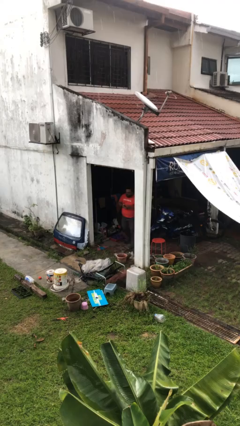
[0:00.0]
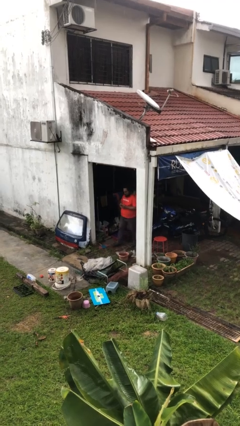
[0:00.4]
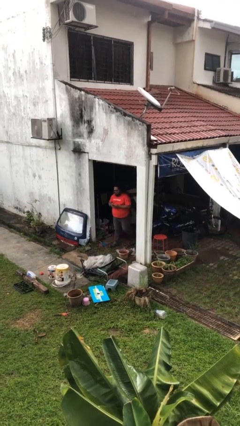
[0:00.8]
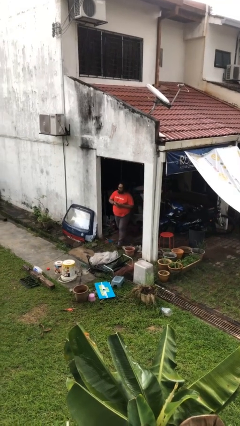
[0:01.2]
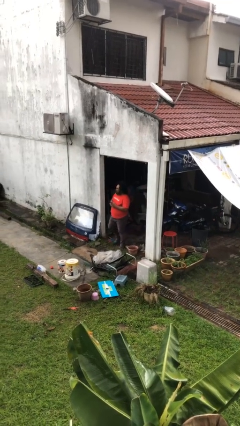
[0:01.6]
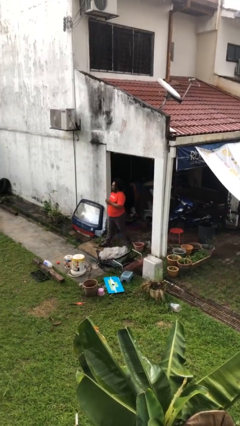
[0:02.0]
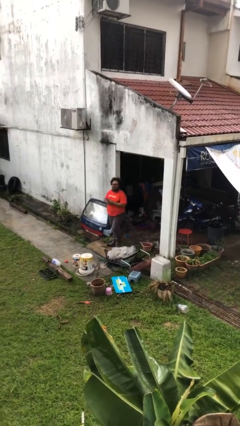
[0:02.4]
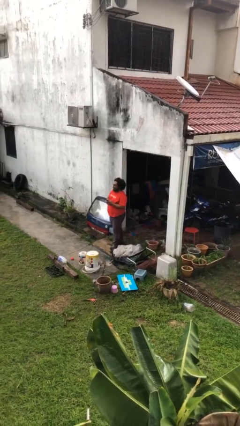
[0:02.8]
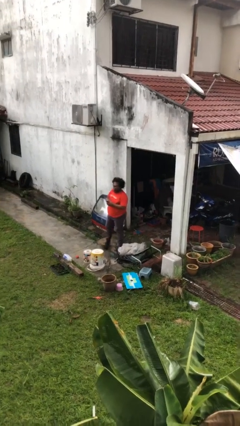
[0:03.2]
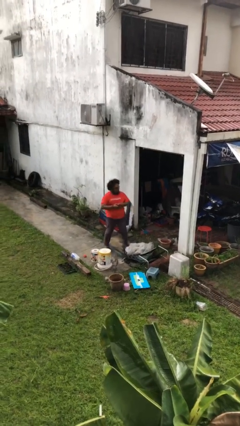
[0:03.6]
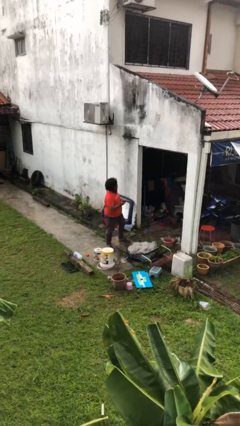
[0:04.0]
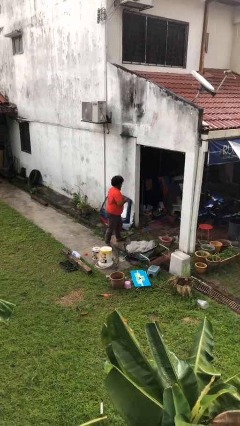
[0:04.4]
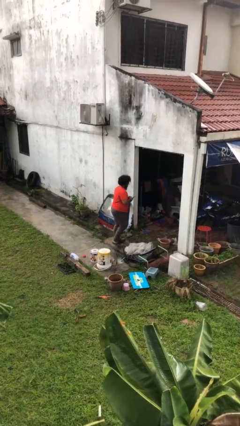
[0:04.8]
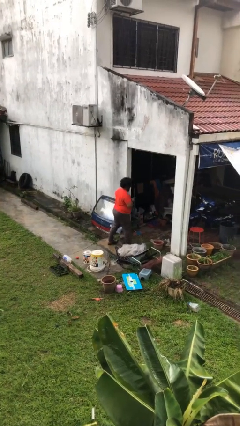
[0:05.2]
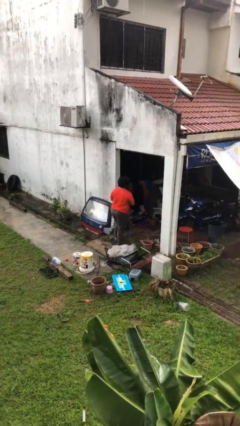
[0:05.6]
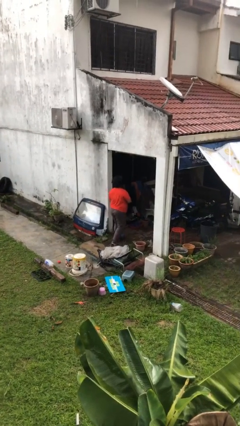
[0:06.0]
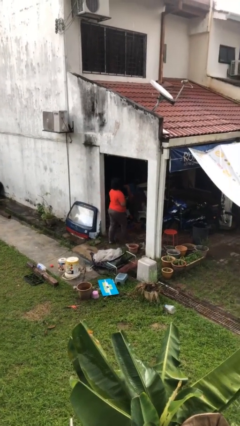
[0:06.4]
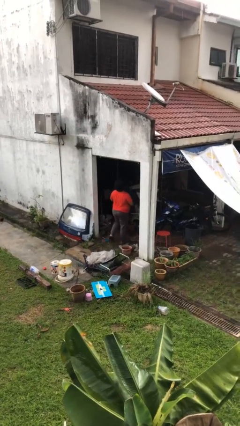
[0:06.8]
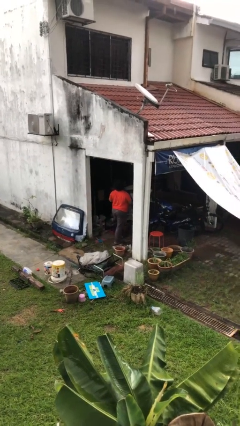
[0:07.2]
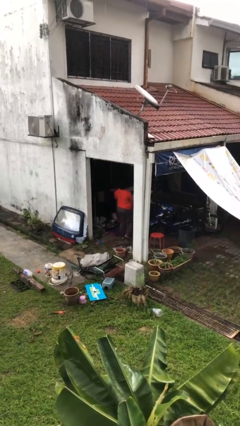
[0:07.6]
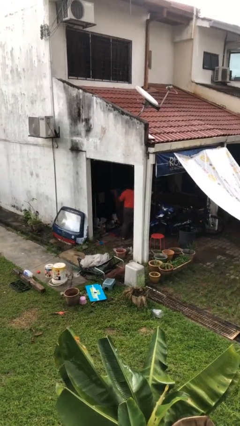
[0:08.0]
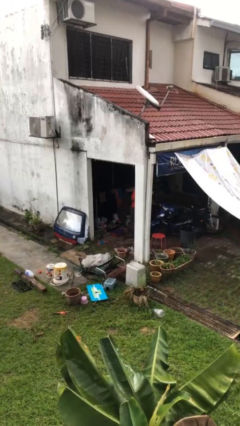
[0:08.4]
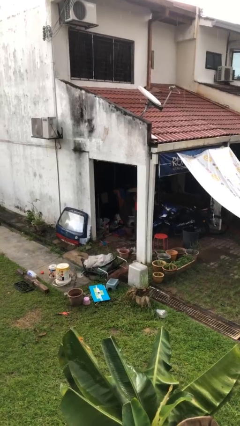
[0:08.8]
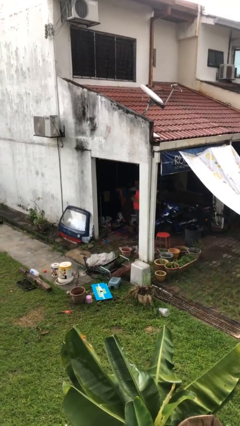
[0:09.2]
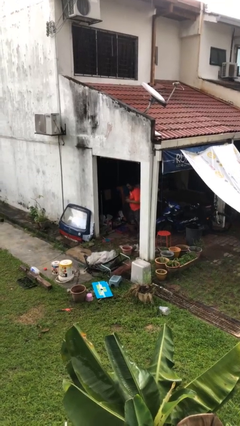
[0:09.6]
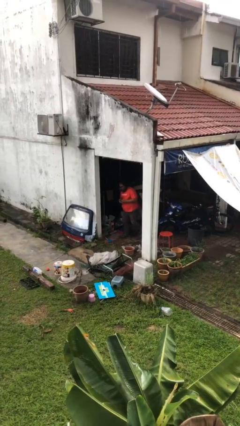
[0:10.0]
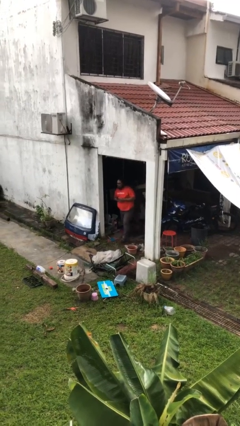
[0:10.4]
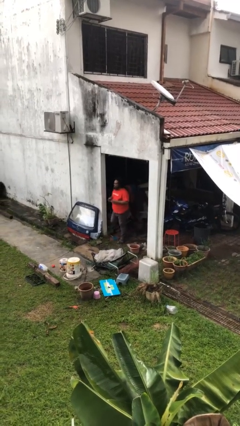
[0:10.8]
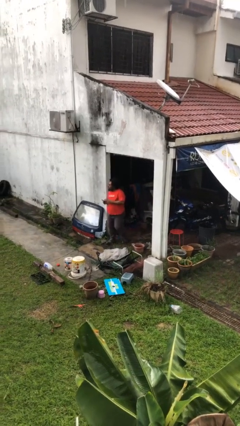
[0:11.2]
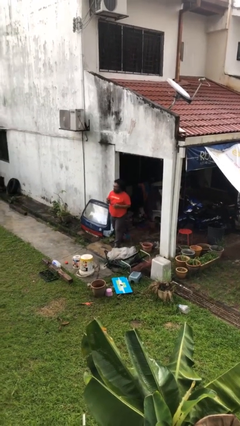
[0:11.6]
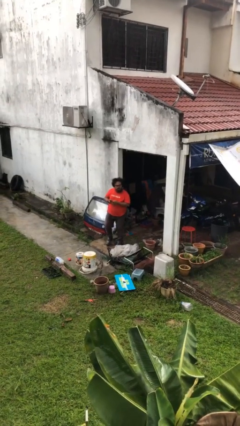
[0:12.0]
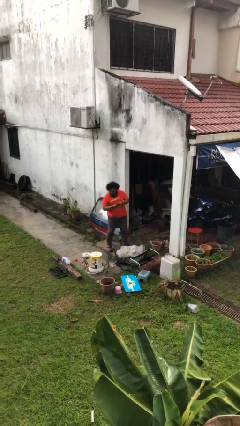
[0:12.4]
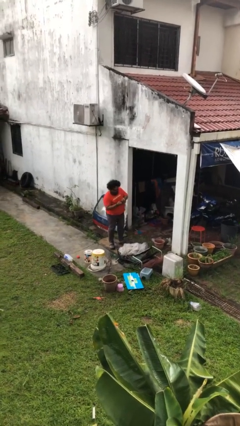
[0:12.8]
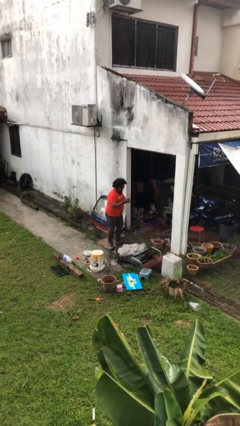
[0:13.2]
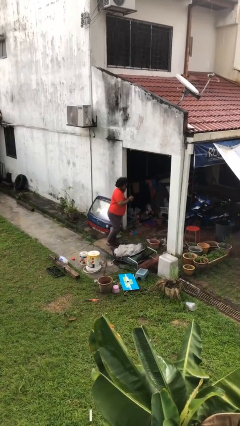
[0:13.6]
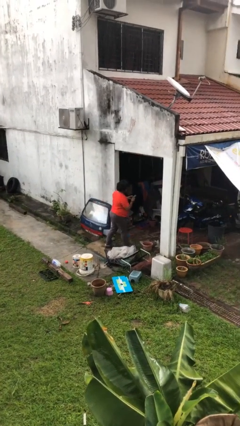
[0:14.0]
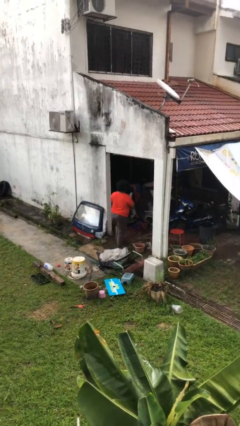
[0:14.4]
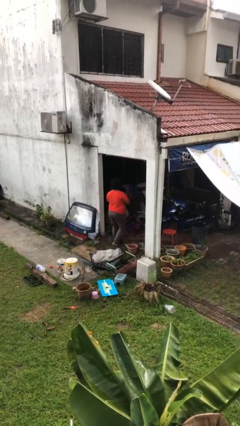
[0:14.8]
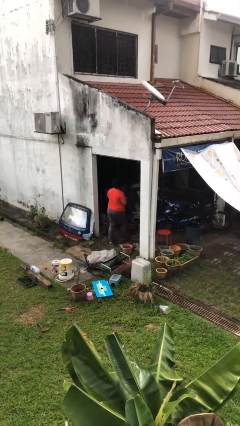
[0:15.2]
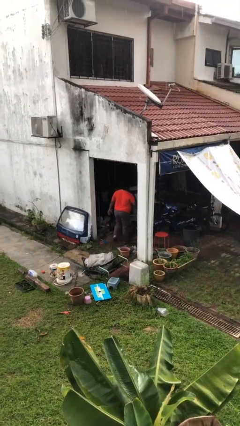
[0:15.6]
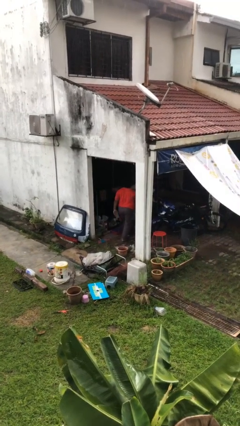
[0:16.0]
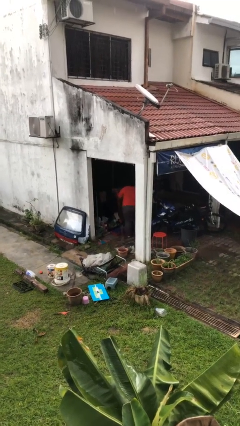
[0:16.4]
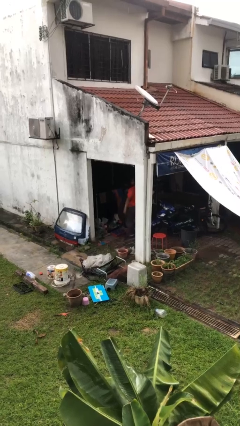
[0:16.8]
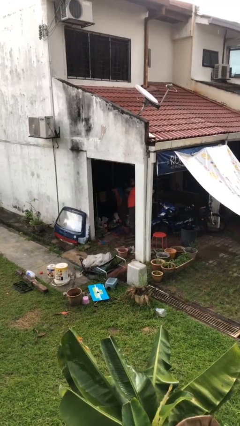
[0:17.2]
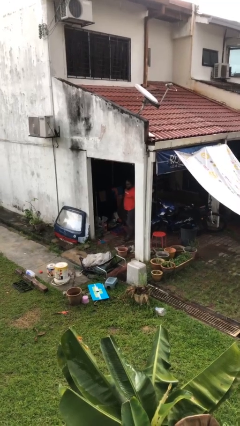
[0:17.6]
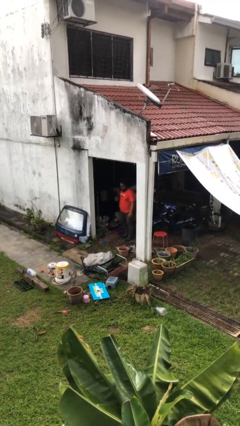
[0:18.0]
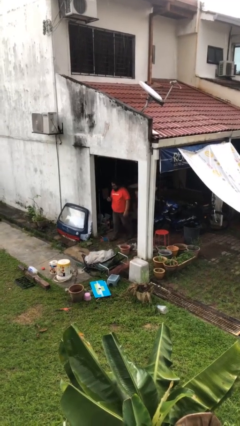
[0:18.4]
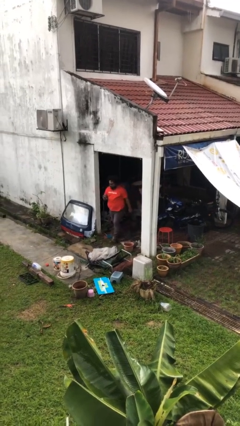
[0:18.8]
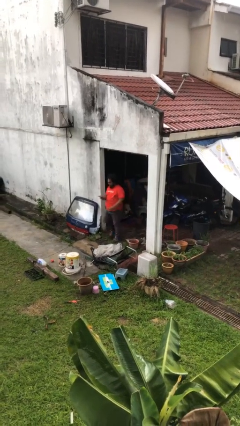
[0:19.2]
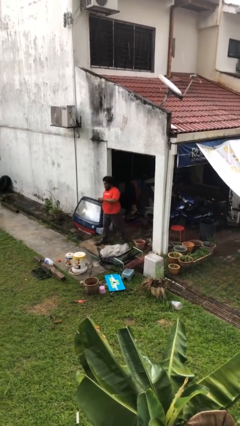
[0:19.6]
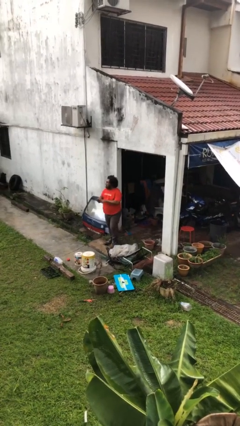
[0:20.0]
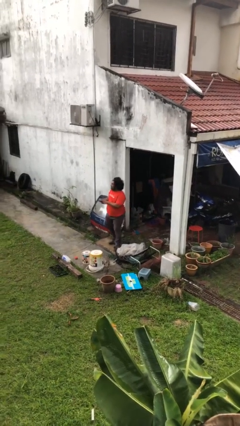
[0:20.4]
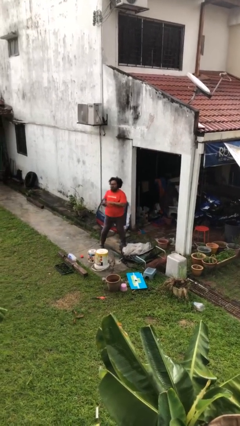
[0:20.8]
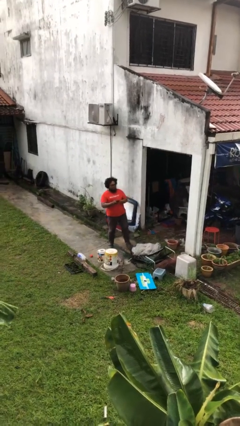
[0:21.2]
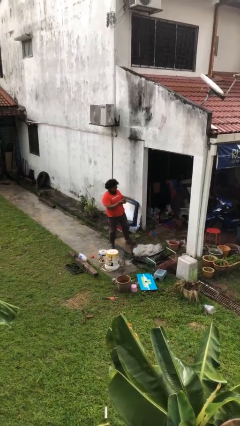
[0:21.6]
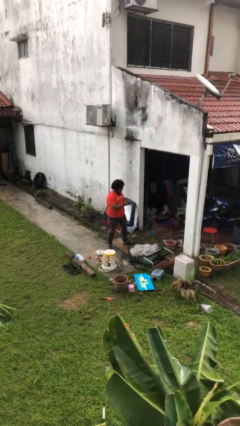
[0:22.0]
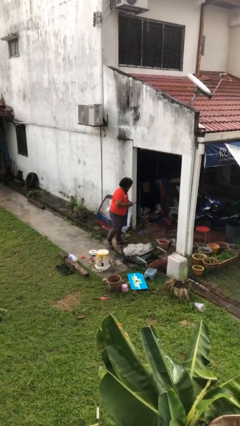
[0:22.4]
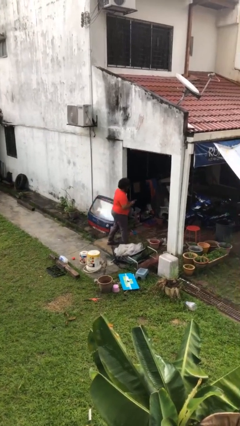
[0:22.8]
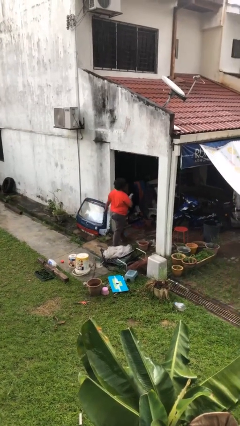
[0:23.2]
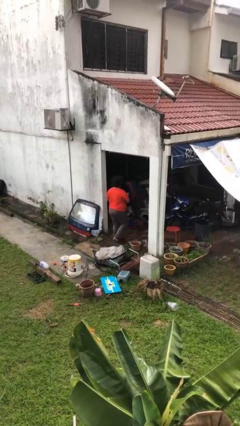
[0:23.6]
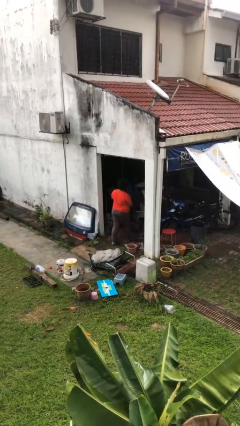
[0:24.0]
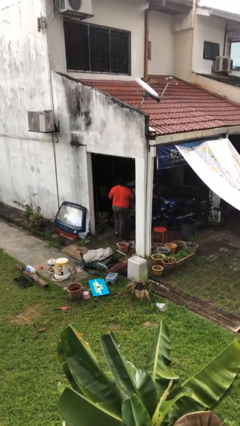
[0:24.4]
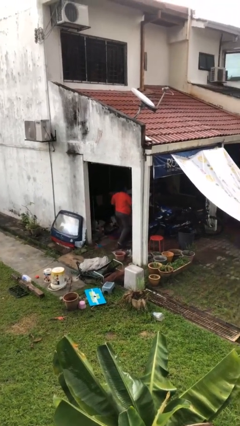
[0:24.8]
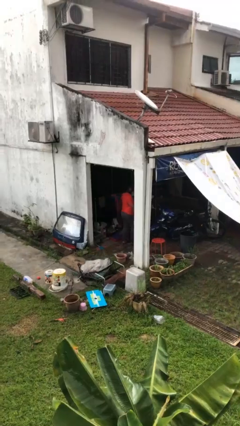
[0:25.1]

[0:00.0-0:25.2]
person texts on phone

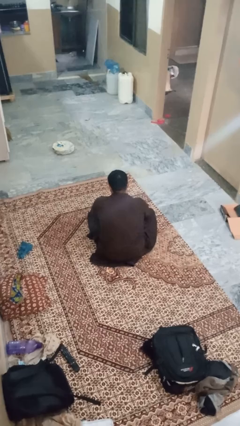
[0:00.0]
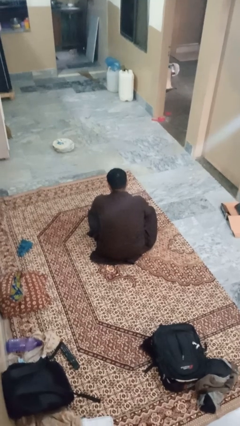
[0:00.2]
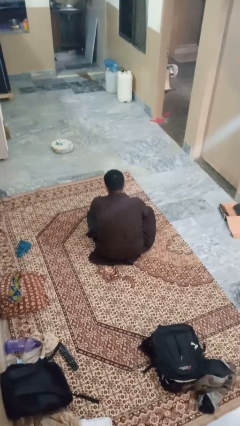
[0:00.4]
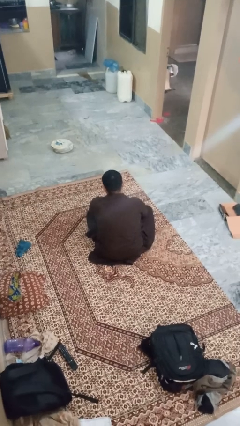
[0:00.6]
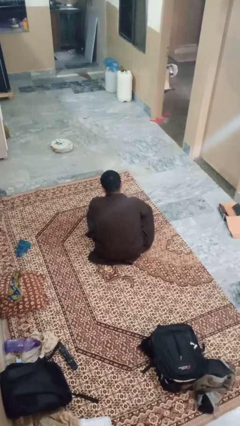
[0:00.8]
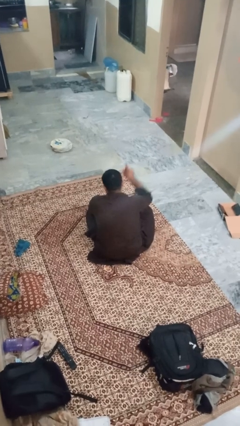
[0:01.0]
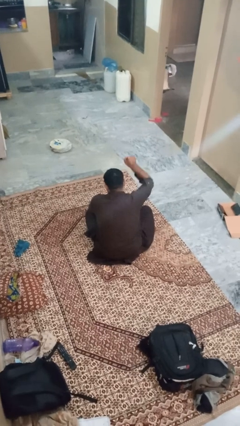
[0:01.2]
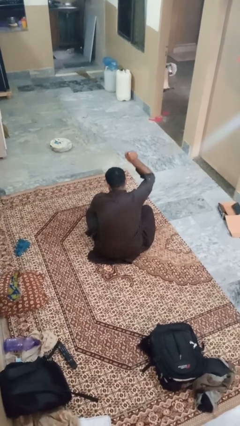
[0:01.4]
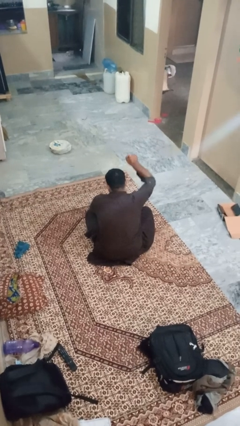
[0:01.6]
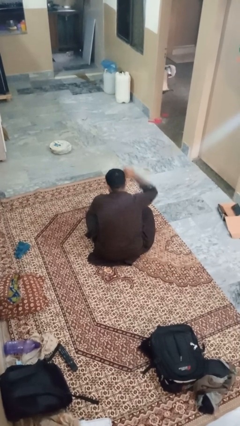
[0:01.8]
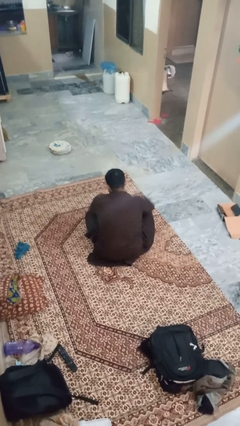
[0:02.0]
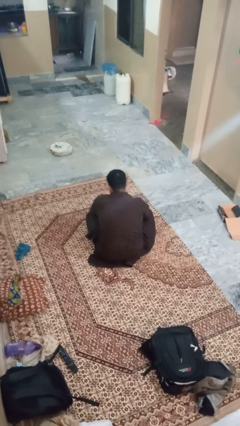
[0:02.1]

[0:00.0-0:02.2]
person gestures number one

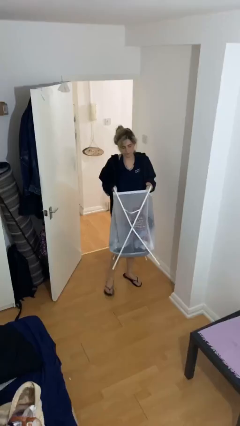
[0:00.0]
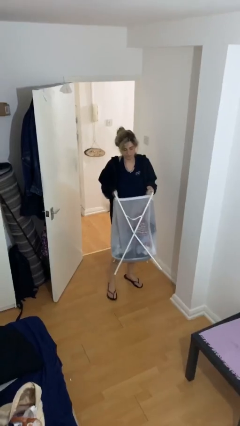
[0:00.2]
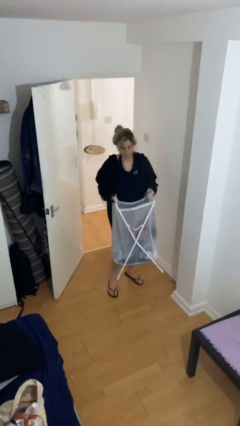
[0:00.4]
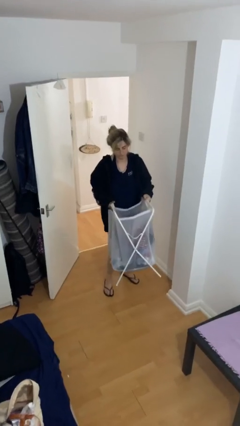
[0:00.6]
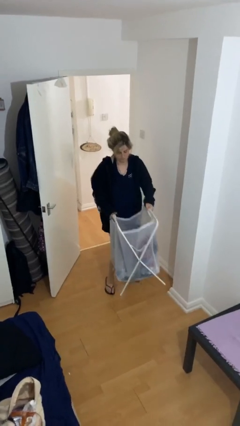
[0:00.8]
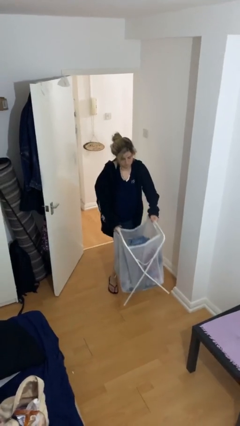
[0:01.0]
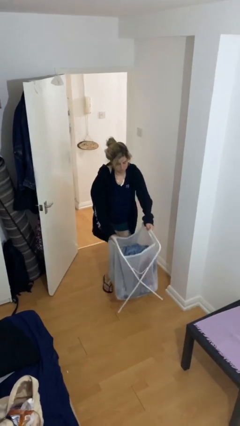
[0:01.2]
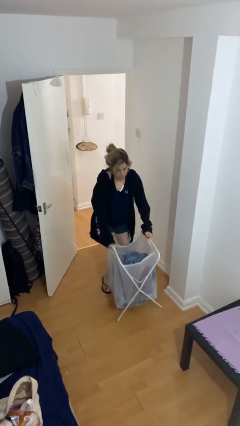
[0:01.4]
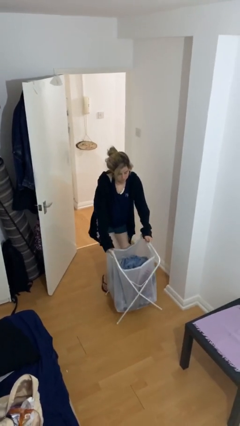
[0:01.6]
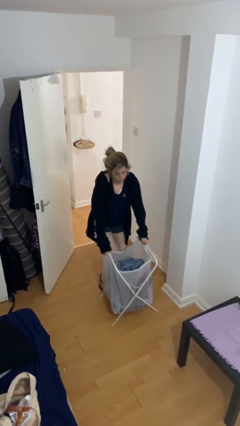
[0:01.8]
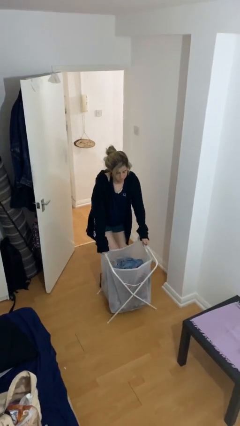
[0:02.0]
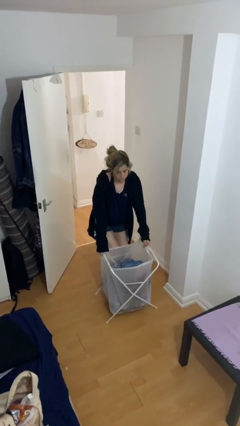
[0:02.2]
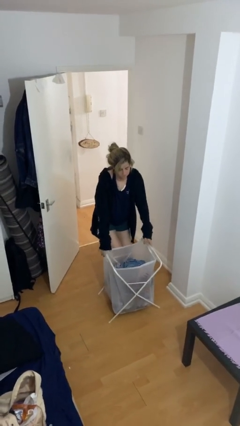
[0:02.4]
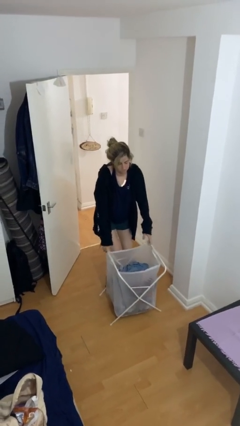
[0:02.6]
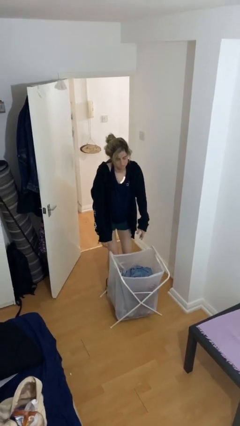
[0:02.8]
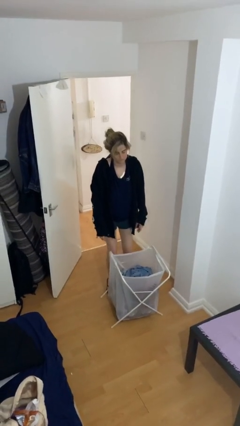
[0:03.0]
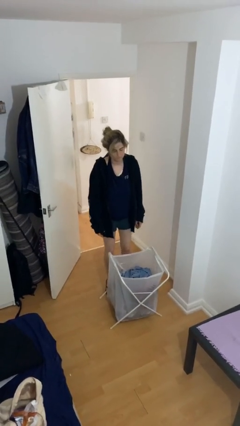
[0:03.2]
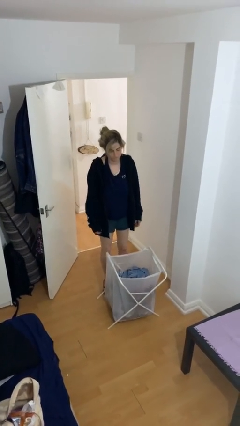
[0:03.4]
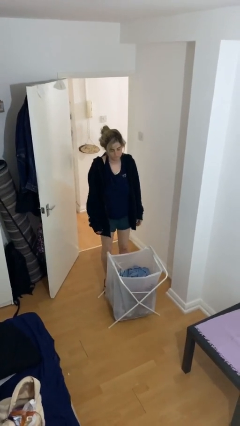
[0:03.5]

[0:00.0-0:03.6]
person puts down object on floor
